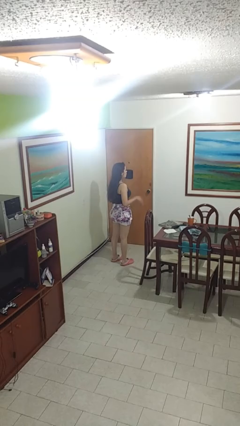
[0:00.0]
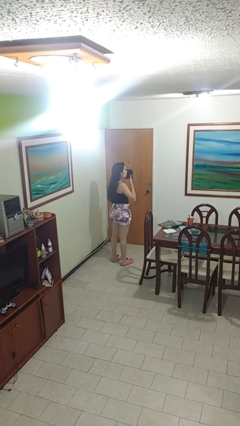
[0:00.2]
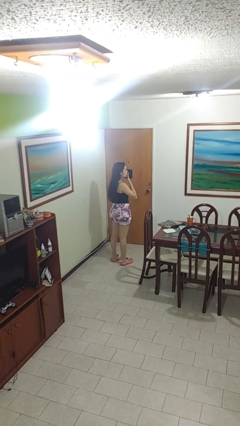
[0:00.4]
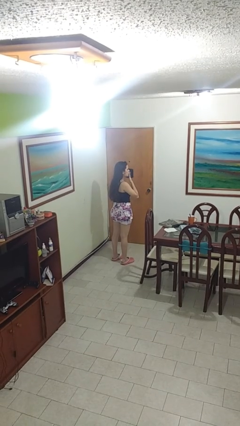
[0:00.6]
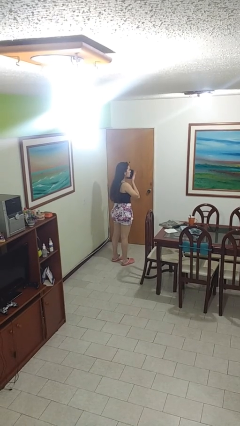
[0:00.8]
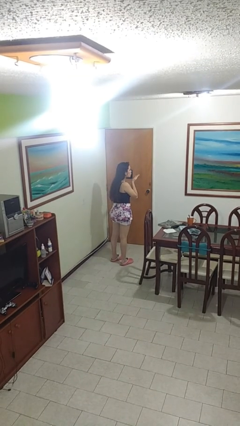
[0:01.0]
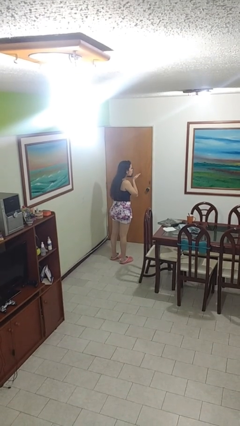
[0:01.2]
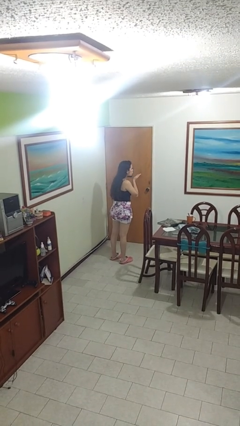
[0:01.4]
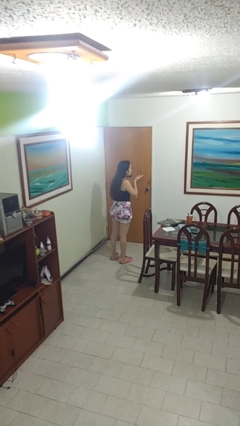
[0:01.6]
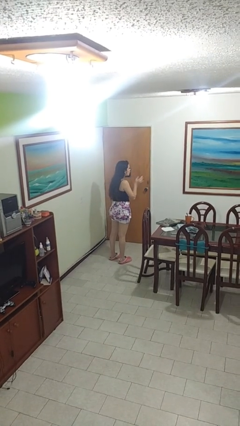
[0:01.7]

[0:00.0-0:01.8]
person gestures blow kiss

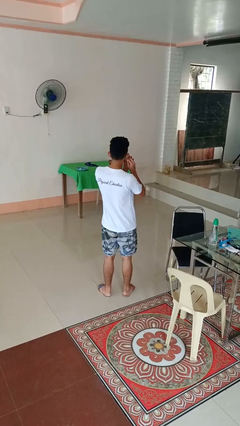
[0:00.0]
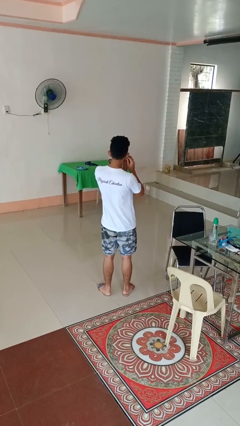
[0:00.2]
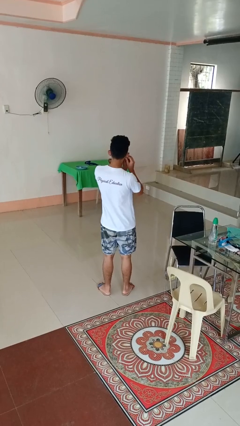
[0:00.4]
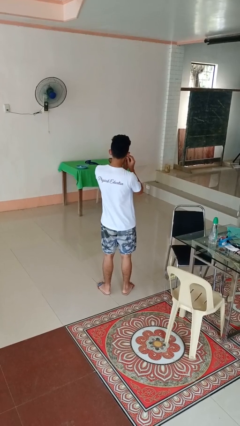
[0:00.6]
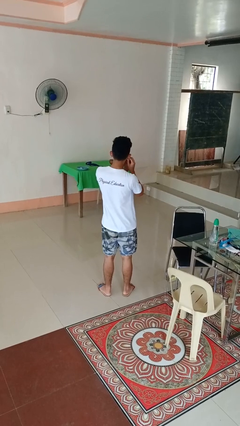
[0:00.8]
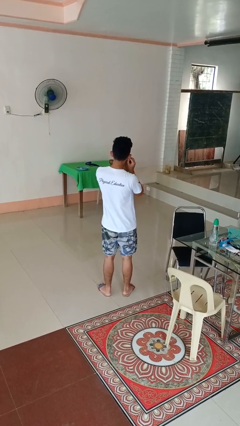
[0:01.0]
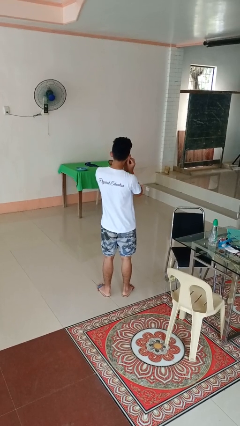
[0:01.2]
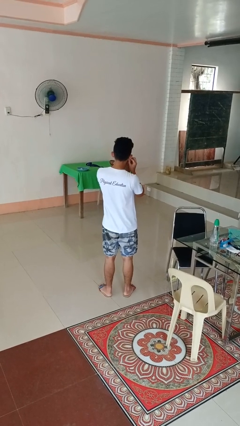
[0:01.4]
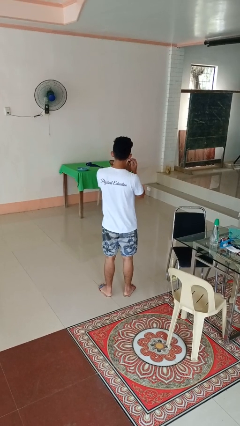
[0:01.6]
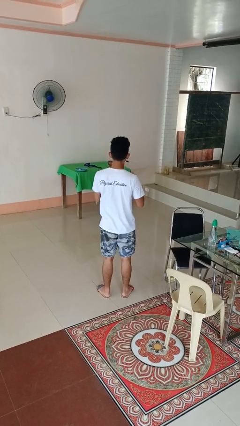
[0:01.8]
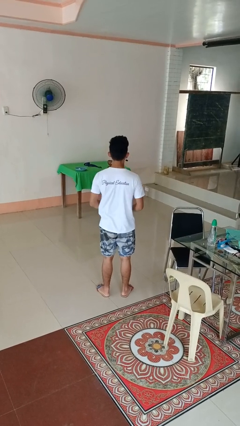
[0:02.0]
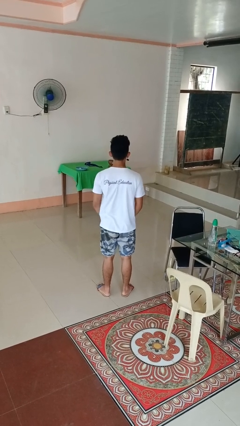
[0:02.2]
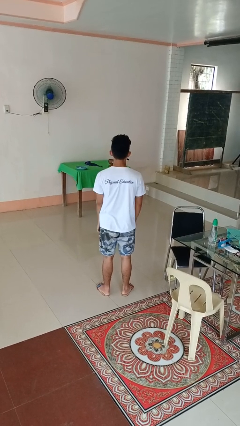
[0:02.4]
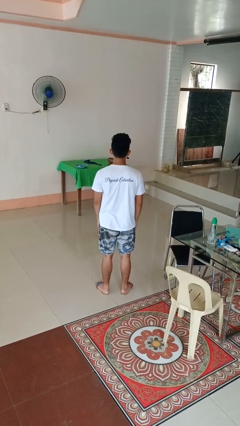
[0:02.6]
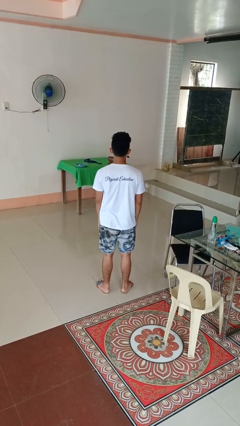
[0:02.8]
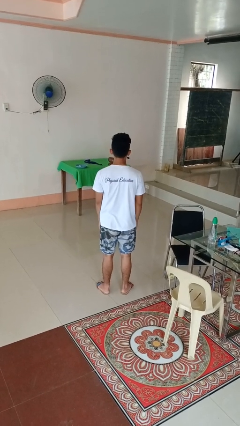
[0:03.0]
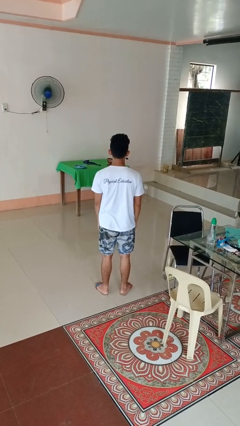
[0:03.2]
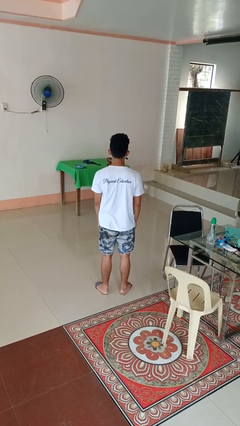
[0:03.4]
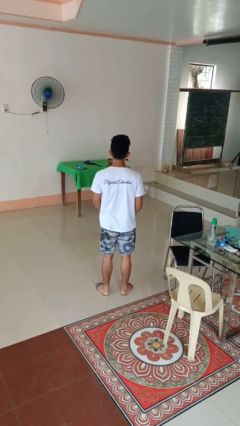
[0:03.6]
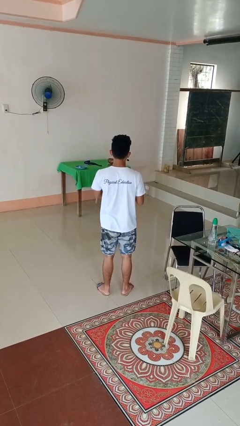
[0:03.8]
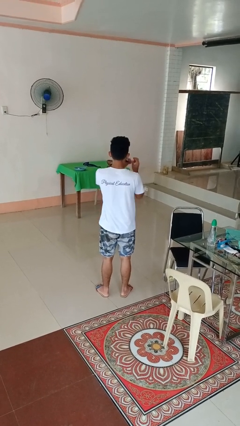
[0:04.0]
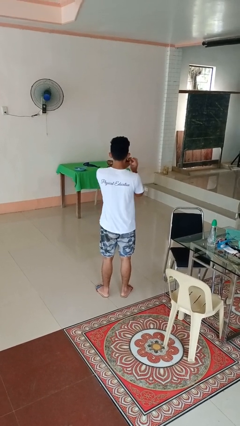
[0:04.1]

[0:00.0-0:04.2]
person puts on earrings

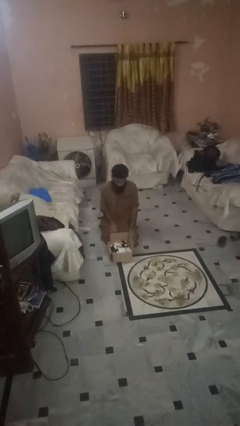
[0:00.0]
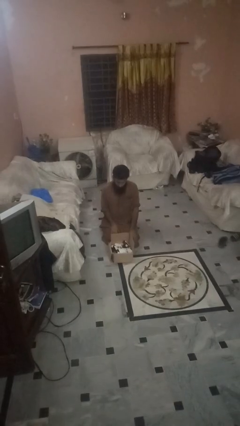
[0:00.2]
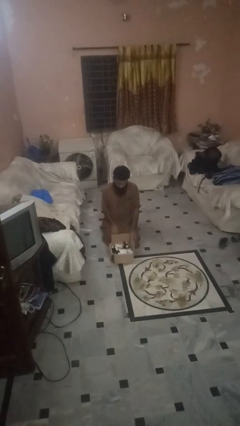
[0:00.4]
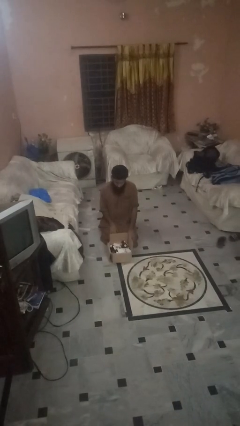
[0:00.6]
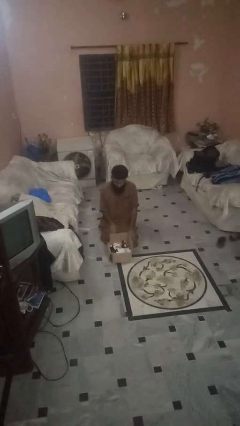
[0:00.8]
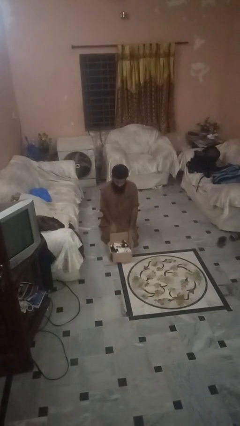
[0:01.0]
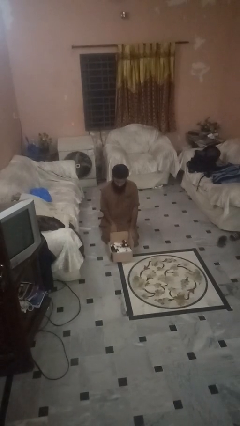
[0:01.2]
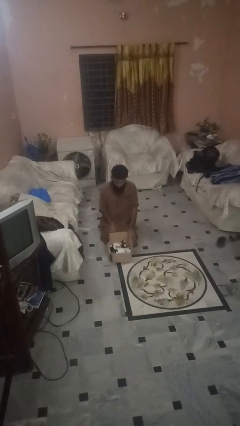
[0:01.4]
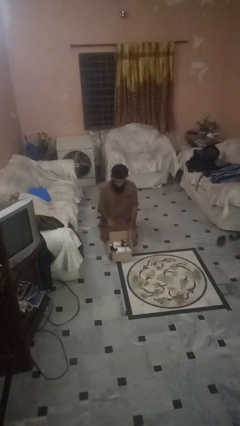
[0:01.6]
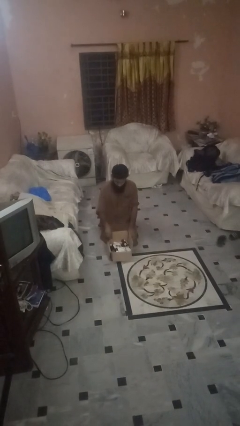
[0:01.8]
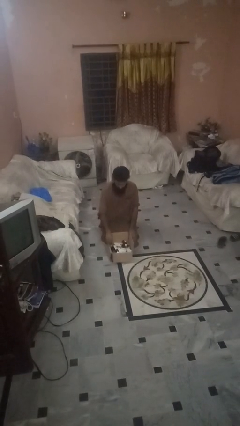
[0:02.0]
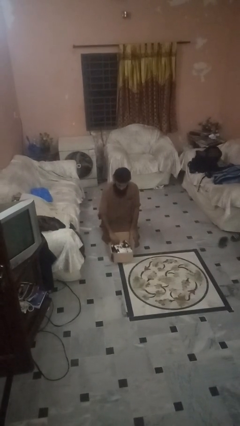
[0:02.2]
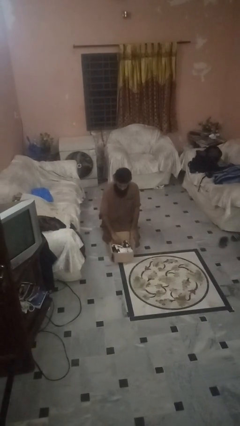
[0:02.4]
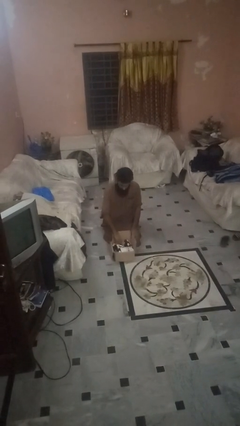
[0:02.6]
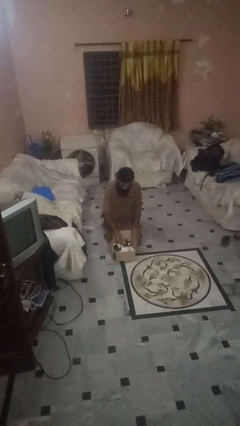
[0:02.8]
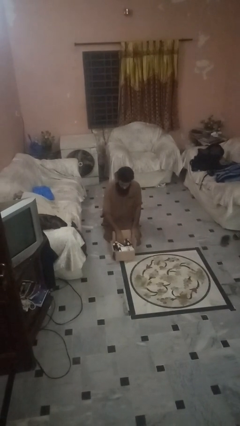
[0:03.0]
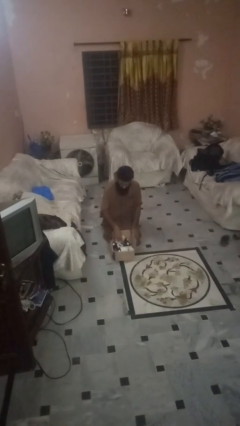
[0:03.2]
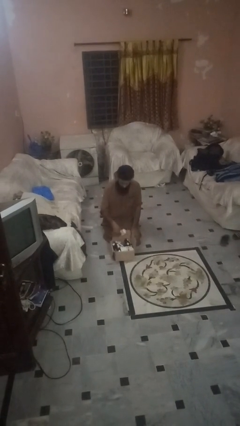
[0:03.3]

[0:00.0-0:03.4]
person takes object from box

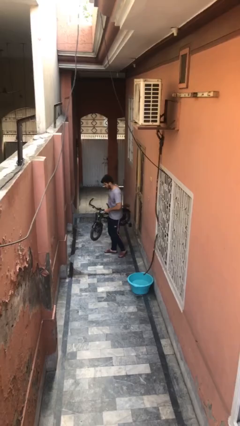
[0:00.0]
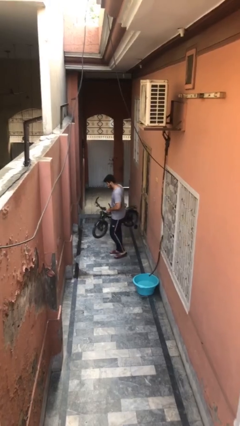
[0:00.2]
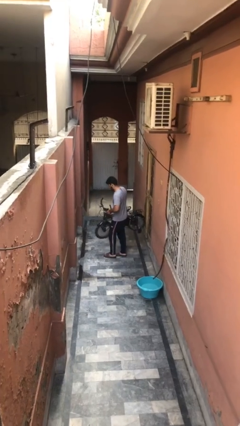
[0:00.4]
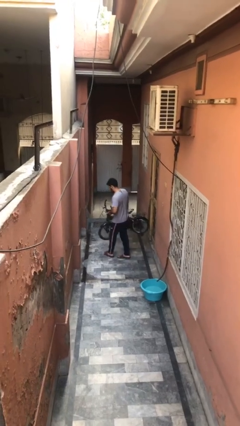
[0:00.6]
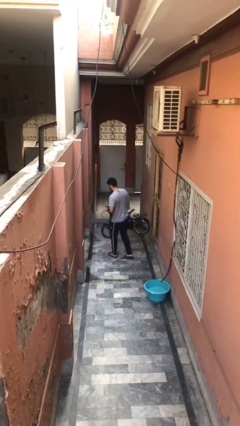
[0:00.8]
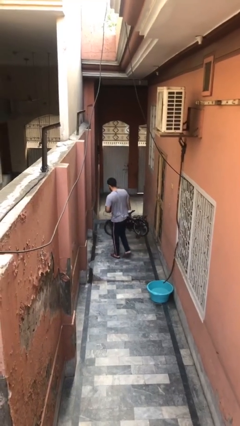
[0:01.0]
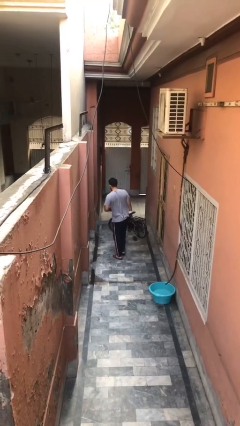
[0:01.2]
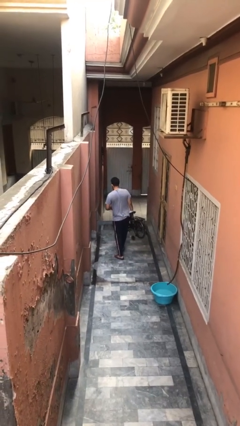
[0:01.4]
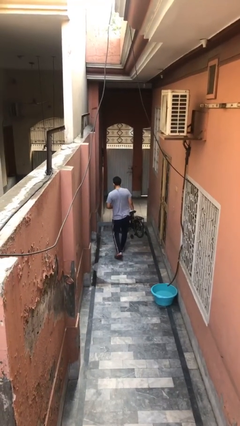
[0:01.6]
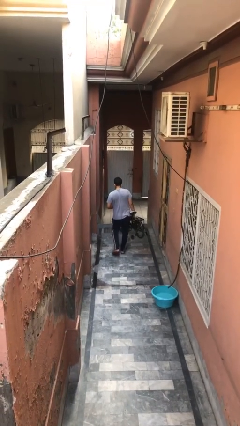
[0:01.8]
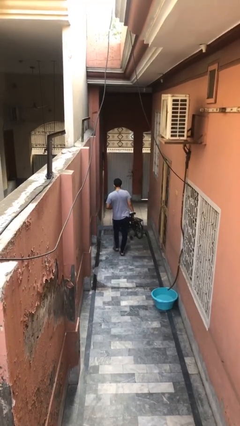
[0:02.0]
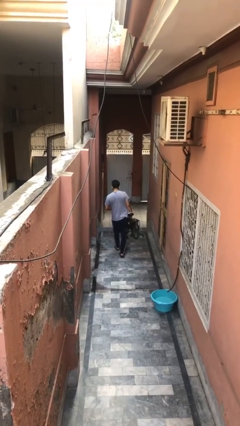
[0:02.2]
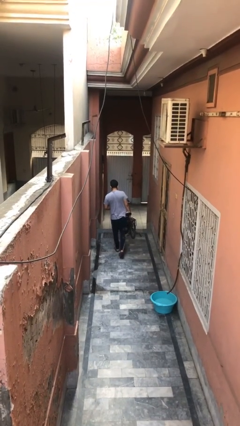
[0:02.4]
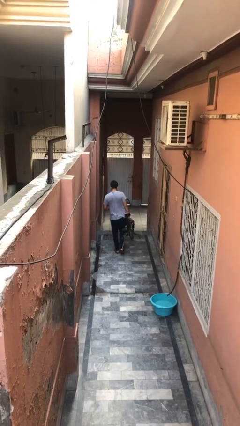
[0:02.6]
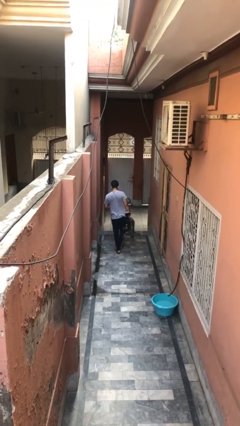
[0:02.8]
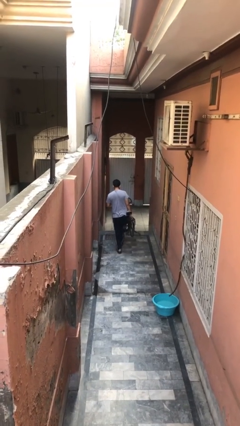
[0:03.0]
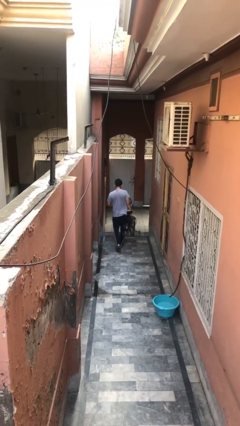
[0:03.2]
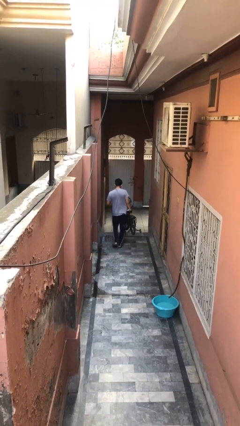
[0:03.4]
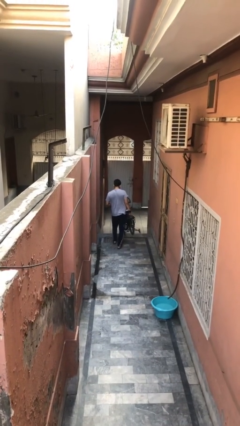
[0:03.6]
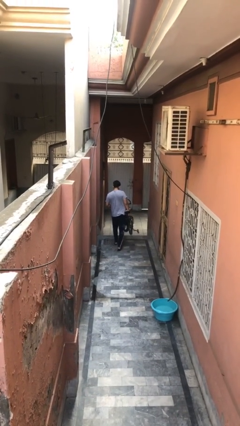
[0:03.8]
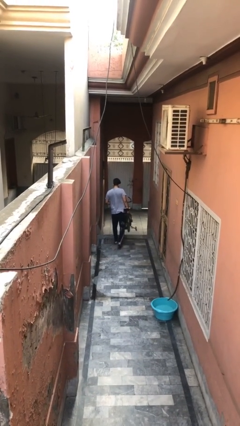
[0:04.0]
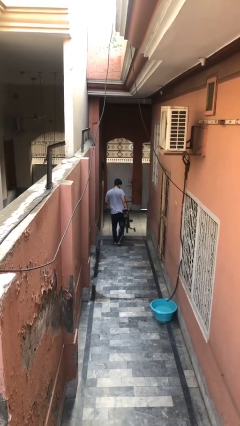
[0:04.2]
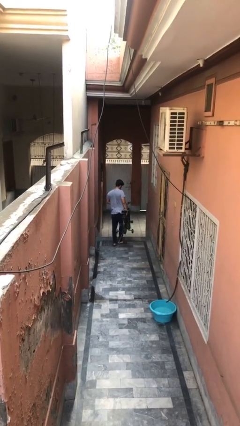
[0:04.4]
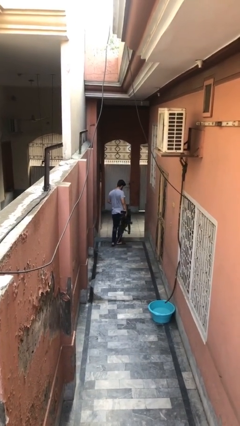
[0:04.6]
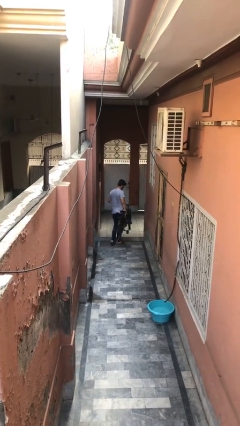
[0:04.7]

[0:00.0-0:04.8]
person carries bicycle

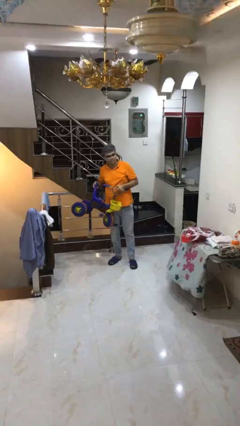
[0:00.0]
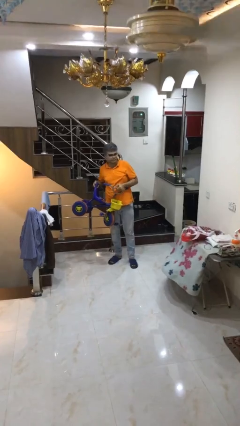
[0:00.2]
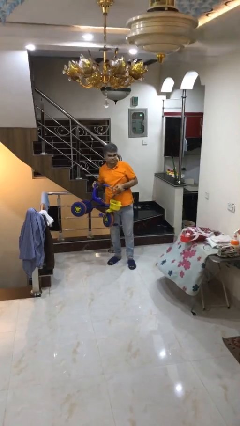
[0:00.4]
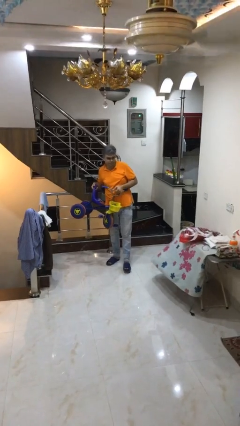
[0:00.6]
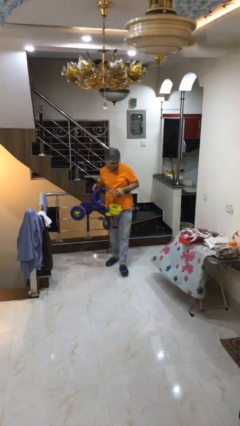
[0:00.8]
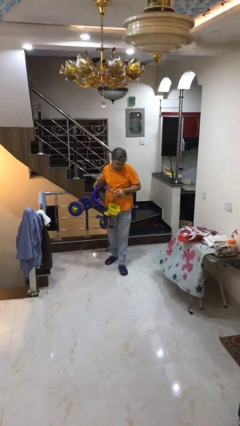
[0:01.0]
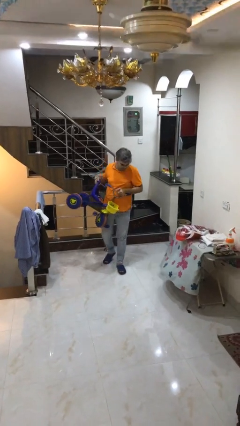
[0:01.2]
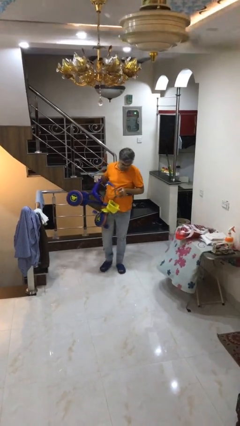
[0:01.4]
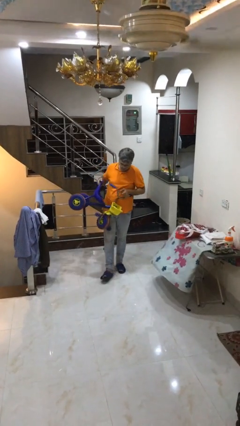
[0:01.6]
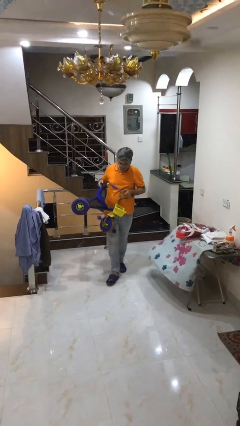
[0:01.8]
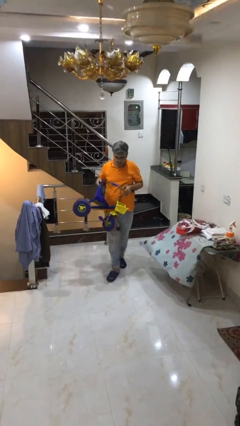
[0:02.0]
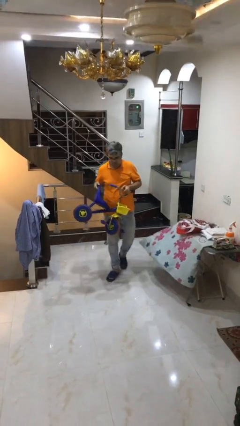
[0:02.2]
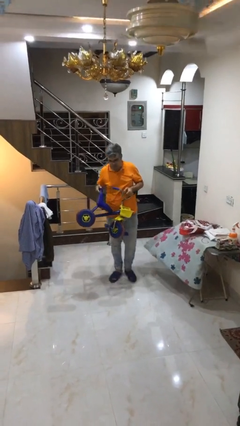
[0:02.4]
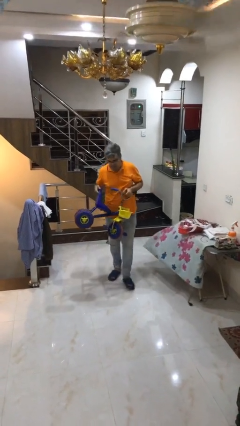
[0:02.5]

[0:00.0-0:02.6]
person carries heavy object

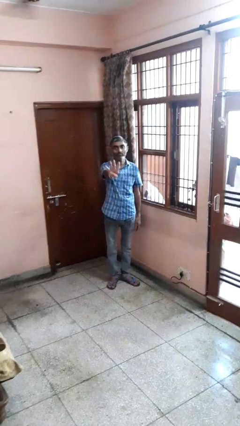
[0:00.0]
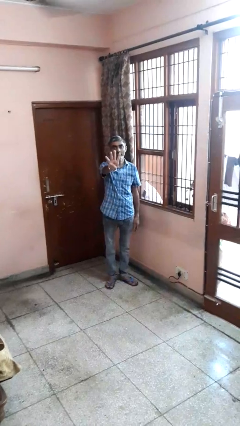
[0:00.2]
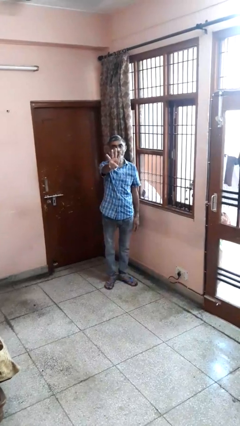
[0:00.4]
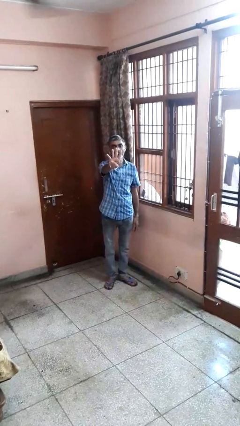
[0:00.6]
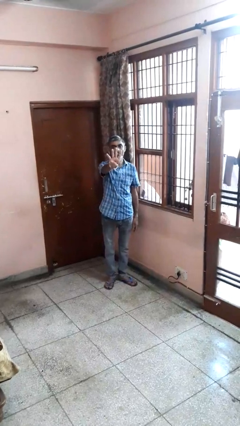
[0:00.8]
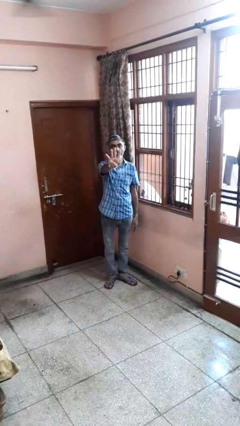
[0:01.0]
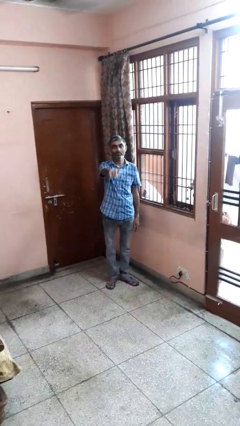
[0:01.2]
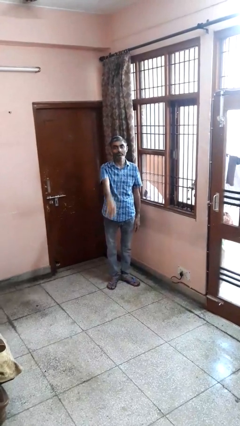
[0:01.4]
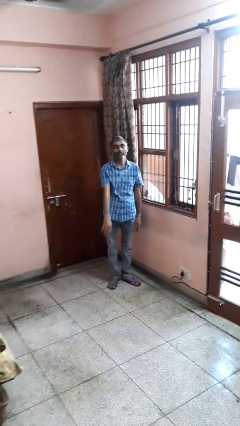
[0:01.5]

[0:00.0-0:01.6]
person gestures number four
